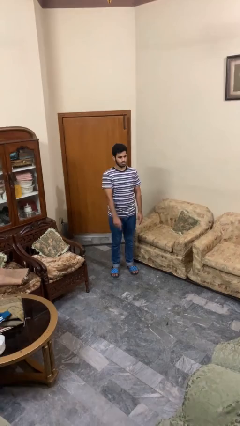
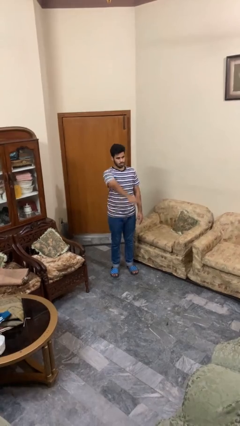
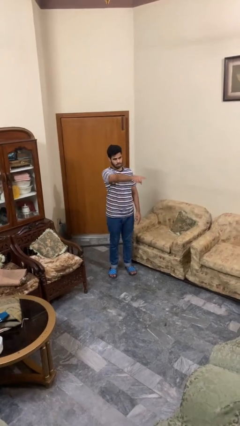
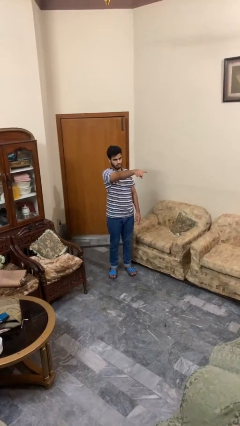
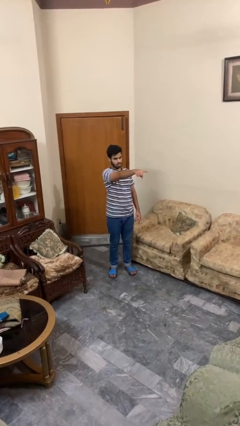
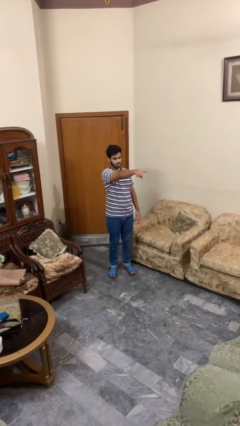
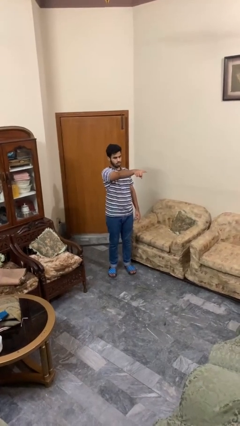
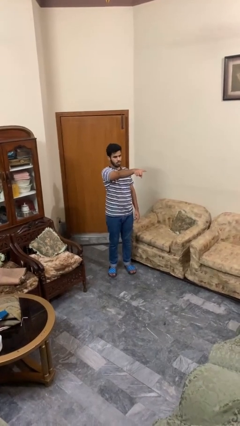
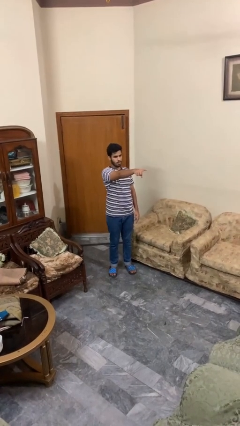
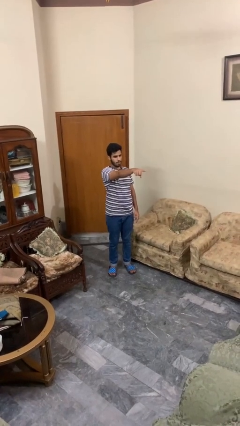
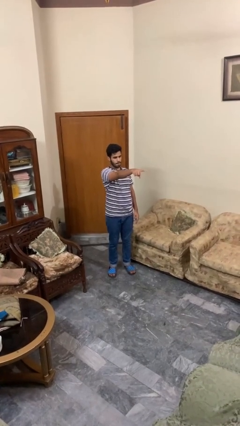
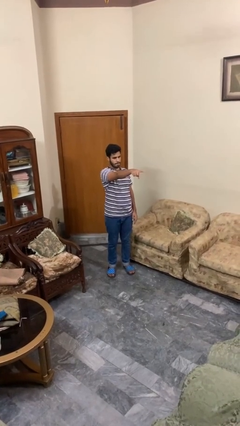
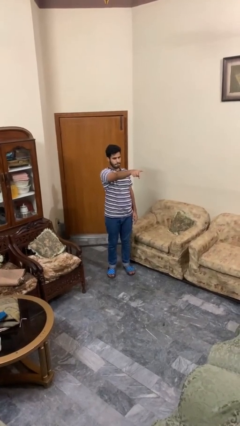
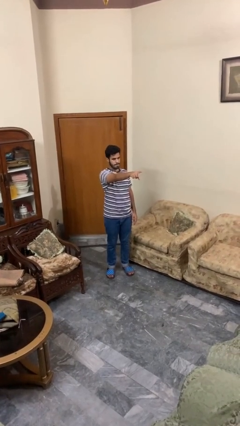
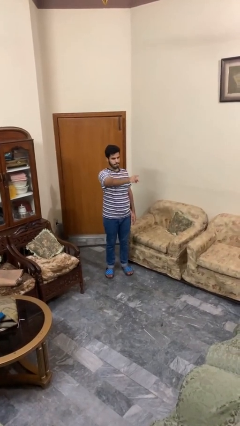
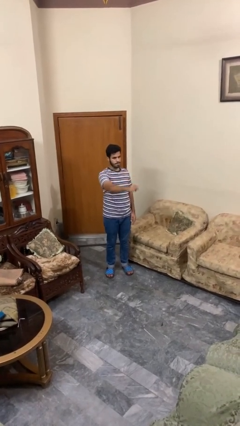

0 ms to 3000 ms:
person points at person

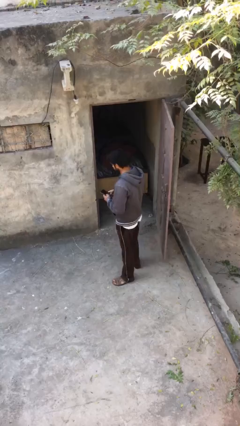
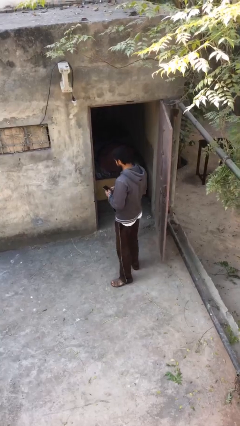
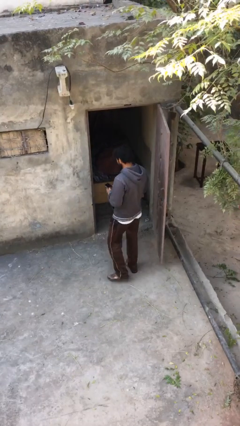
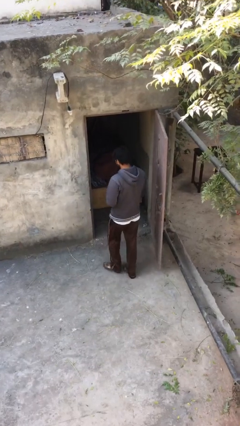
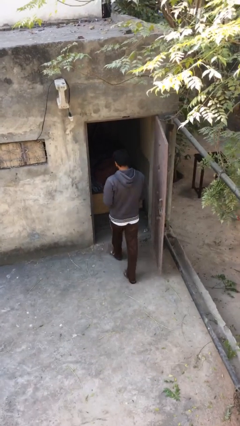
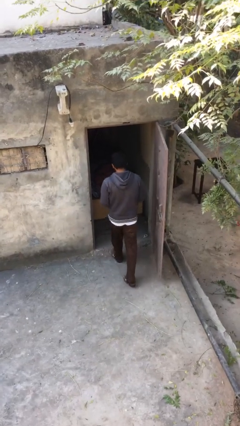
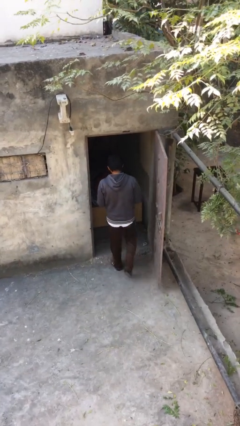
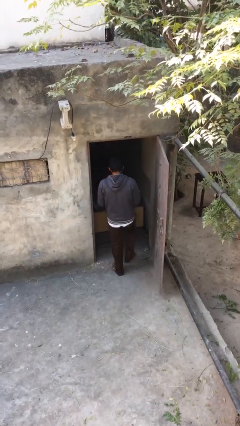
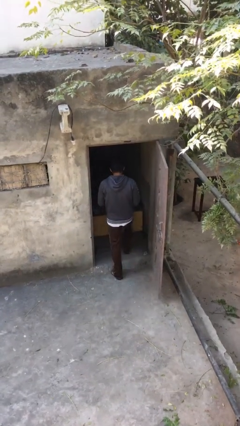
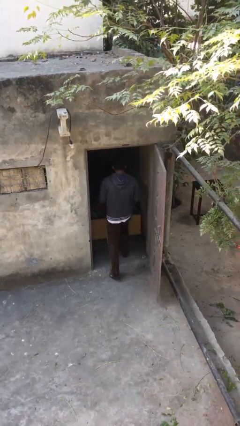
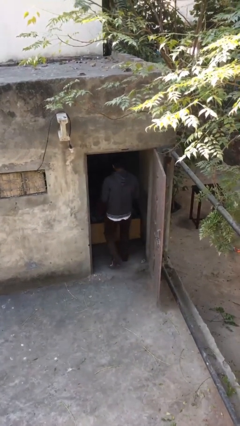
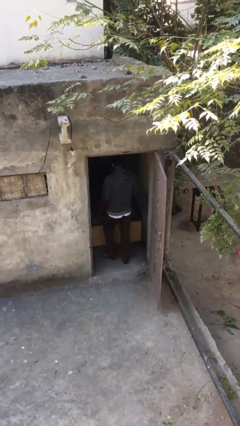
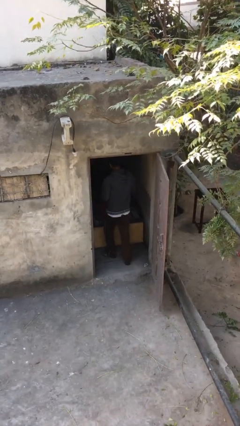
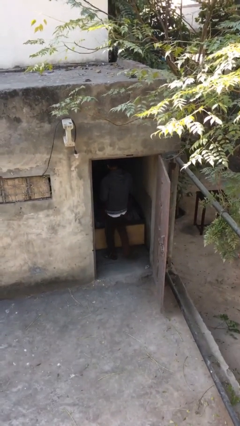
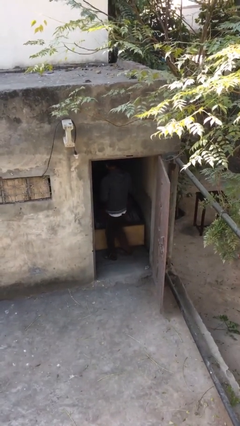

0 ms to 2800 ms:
person exits scene through structure

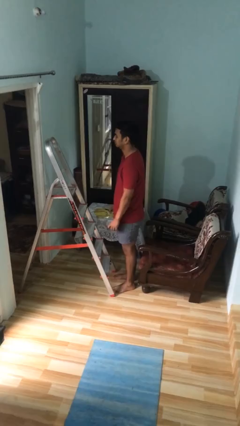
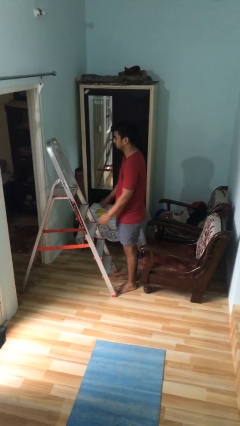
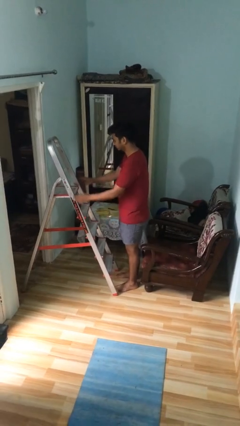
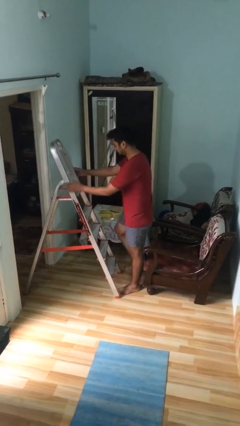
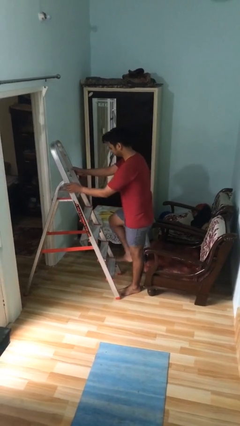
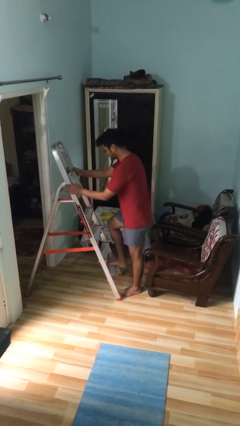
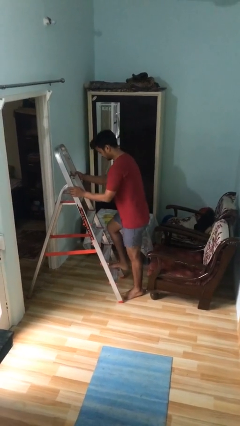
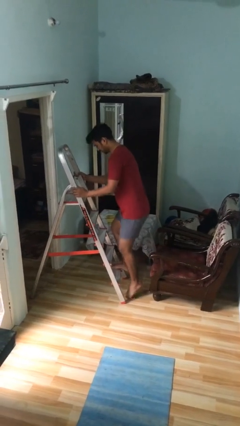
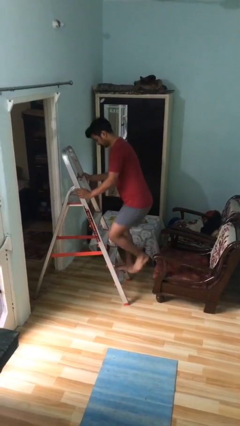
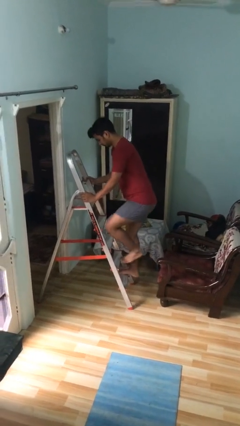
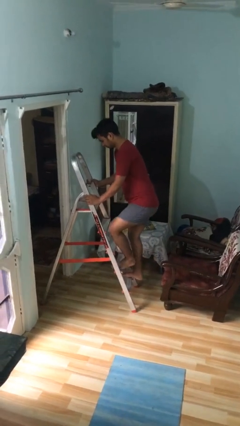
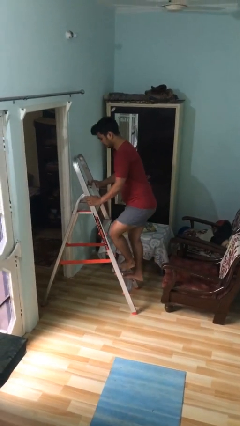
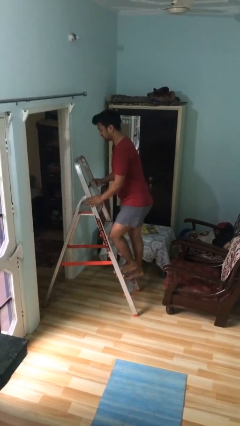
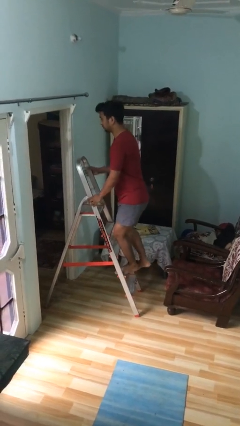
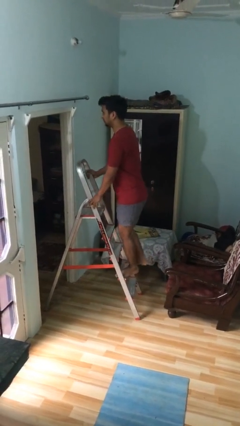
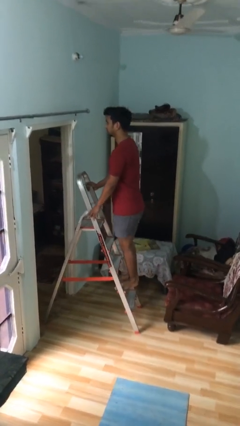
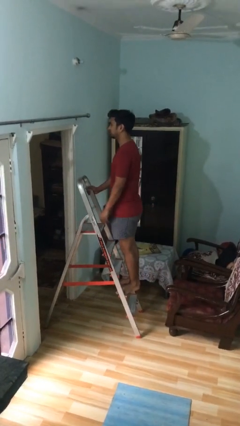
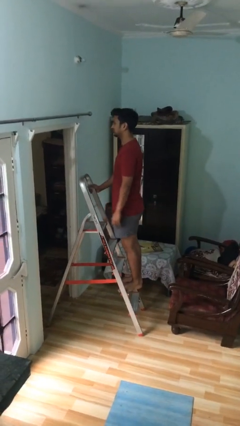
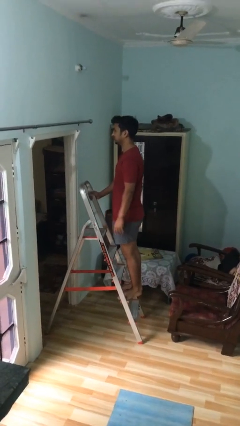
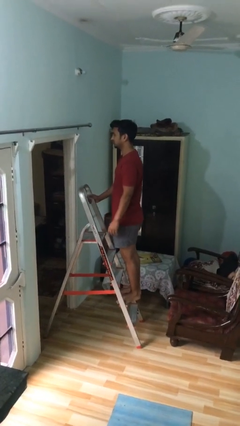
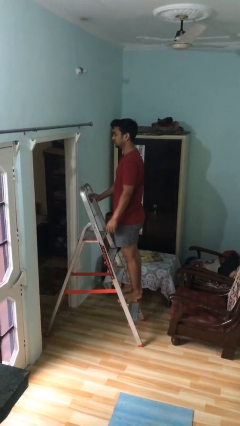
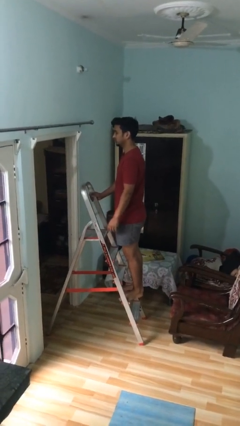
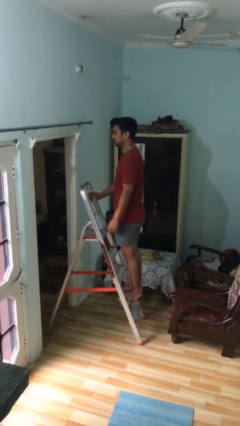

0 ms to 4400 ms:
person climbs up ladder

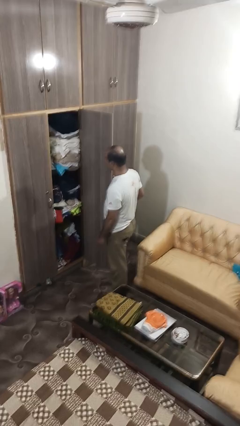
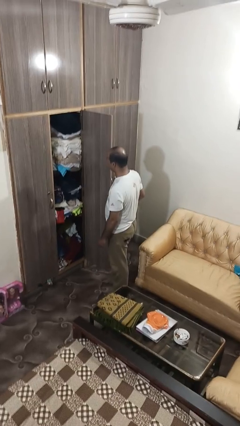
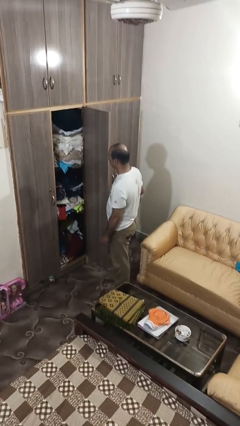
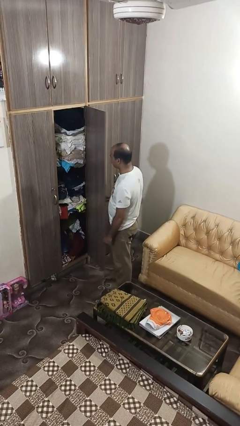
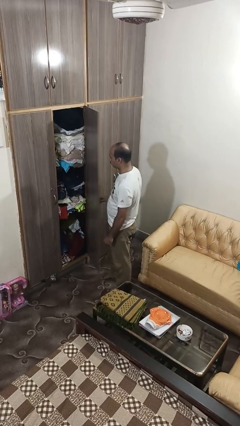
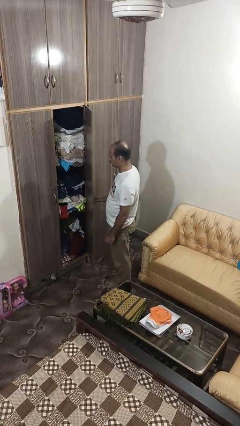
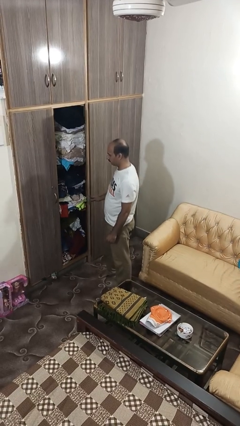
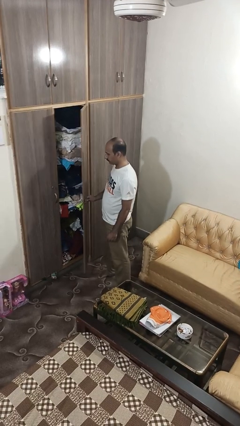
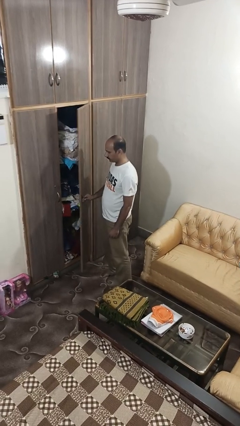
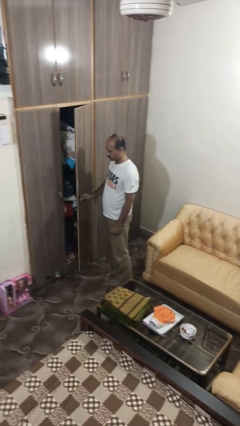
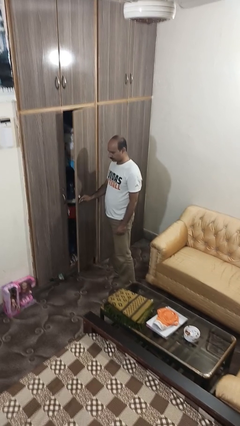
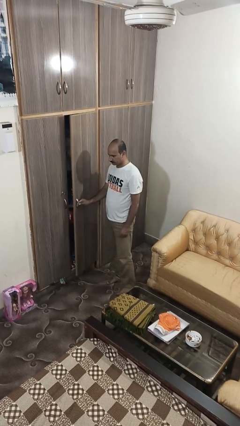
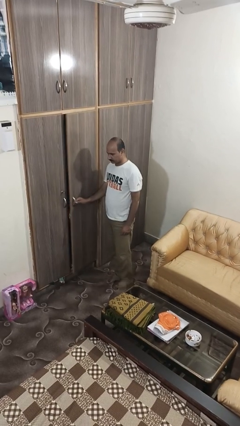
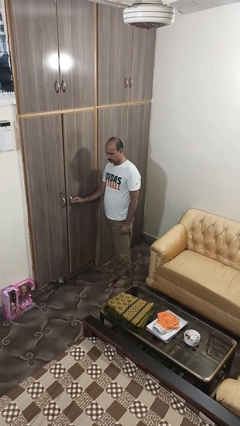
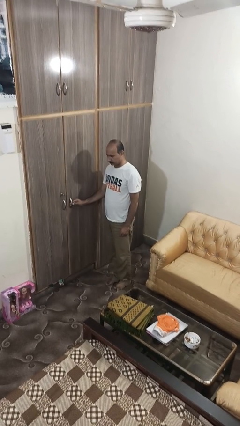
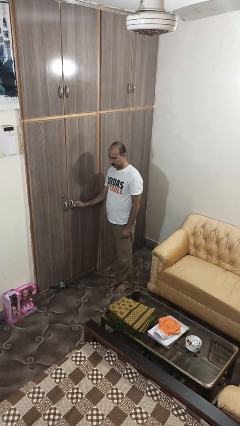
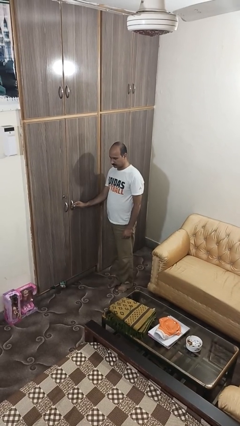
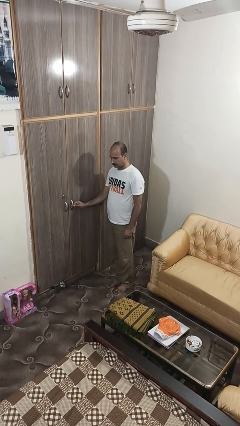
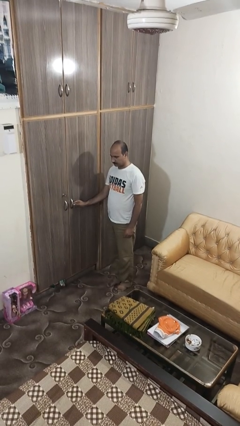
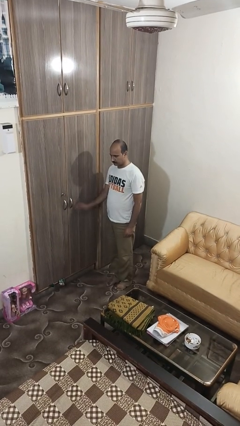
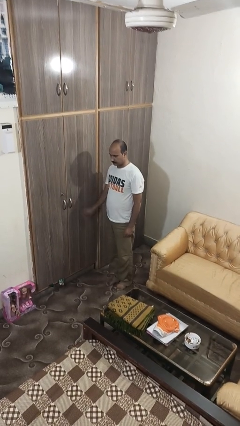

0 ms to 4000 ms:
person closes closet door

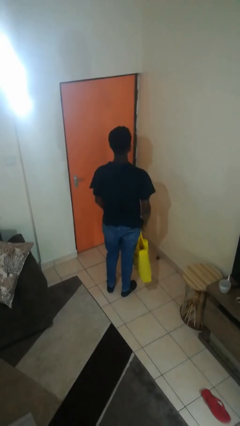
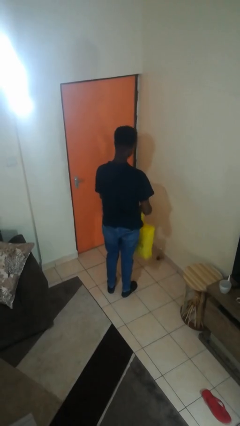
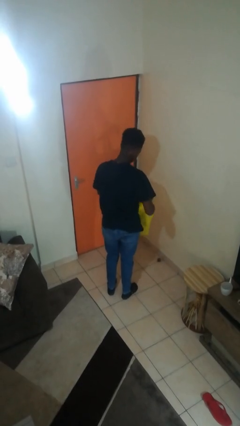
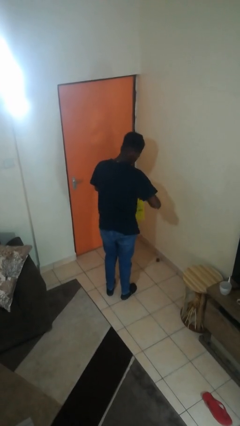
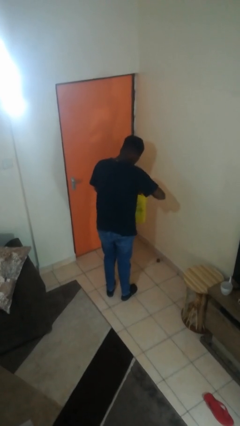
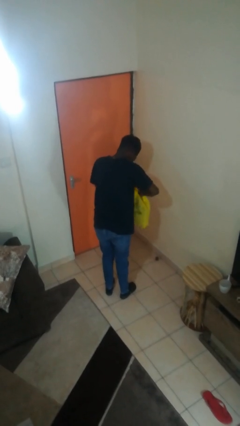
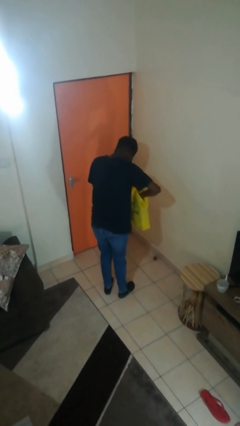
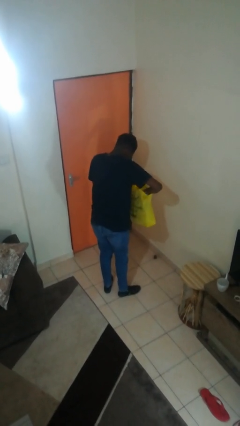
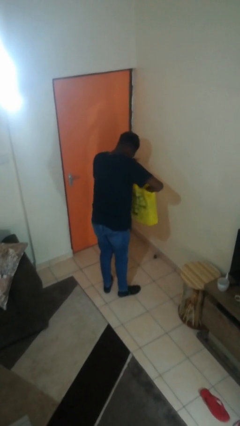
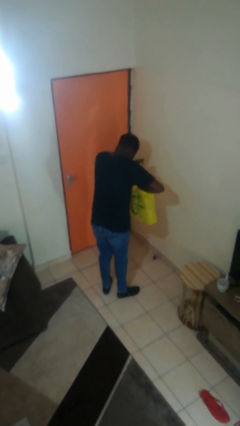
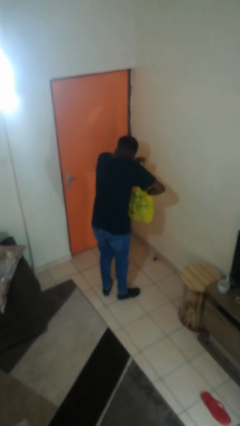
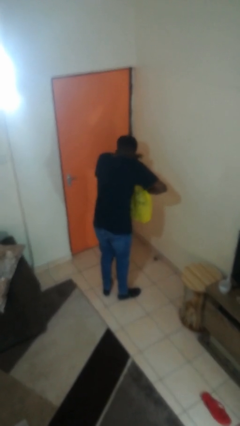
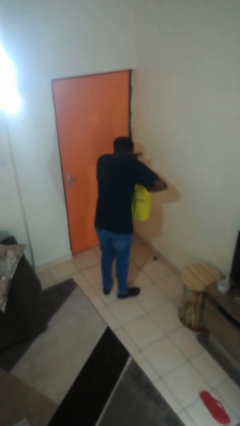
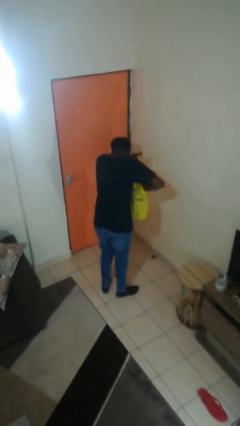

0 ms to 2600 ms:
person searches in bag

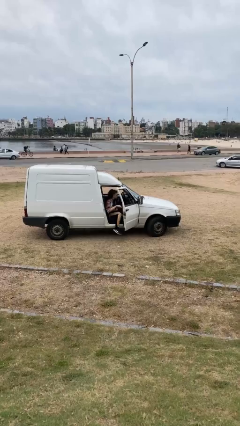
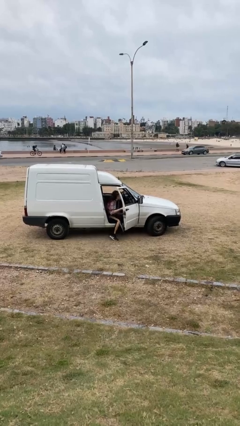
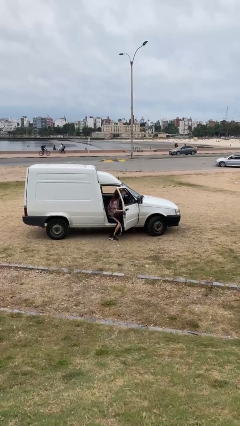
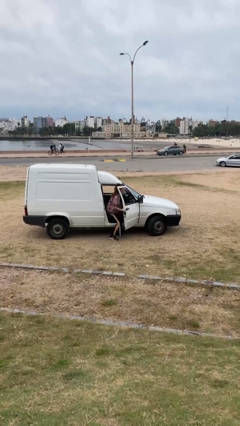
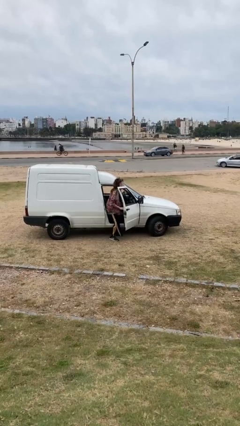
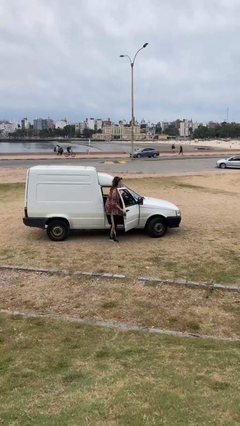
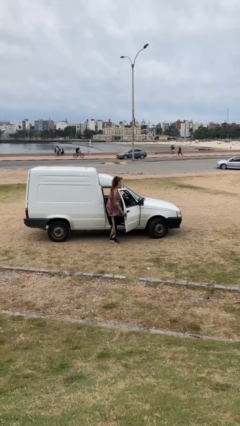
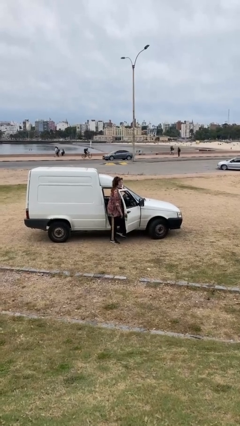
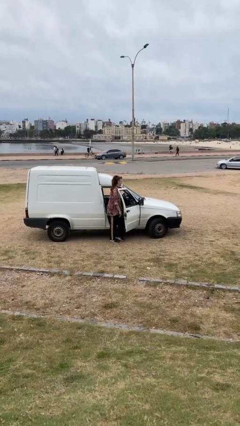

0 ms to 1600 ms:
person exits car
